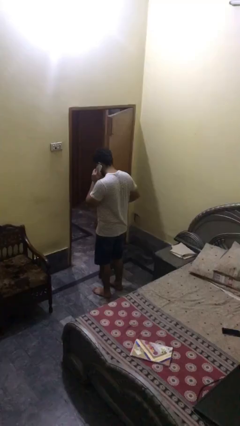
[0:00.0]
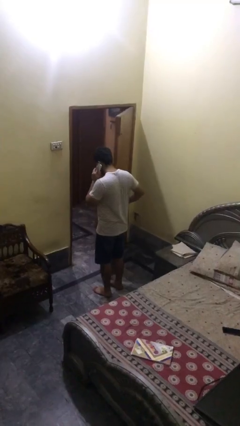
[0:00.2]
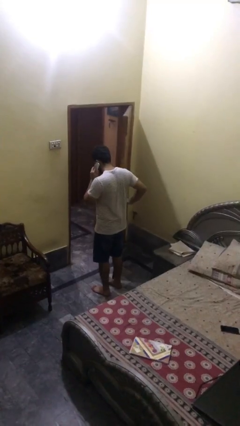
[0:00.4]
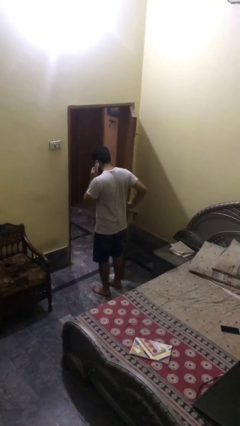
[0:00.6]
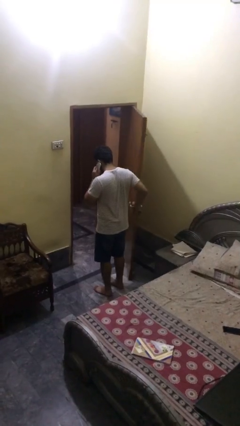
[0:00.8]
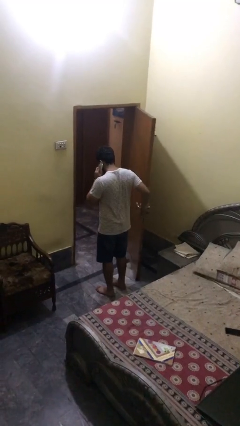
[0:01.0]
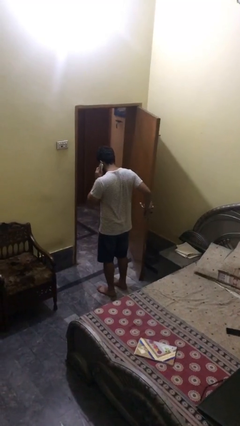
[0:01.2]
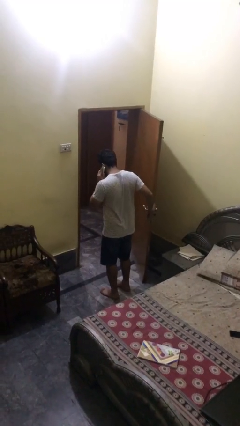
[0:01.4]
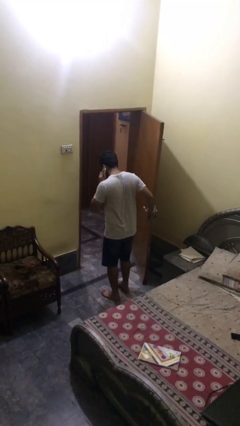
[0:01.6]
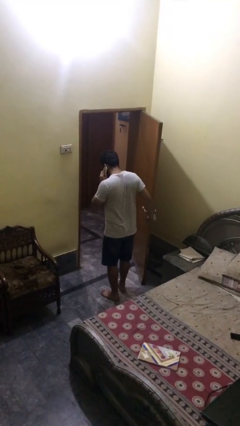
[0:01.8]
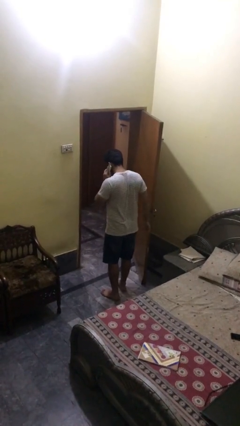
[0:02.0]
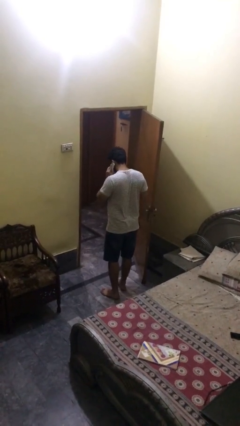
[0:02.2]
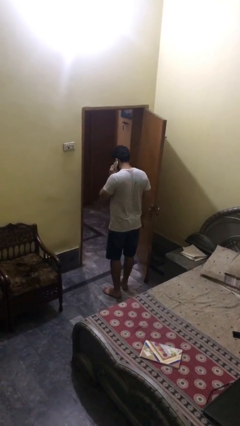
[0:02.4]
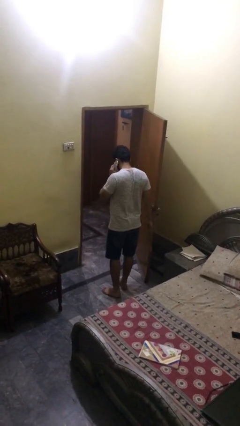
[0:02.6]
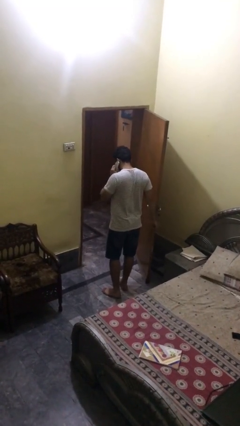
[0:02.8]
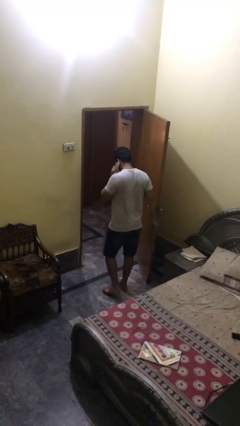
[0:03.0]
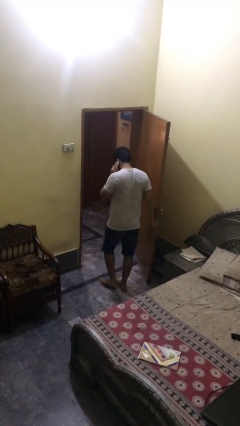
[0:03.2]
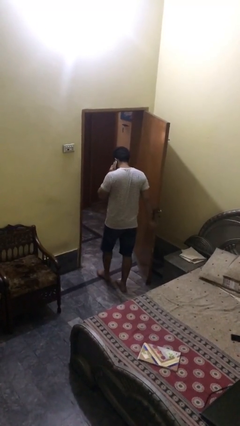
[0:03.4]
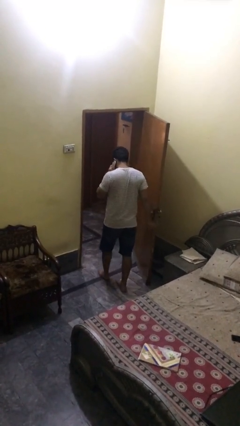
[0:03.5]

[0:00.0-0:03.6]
person opens facility door

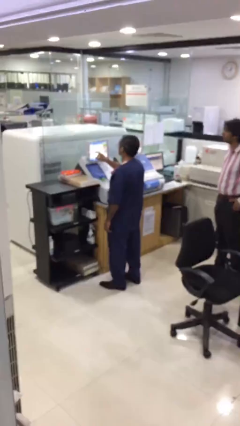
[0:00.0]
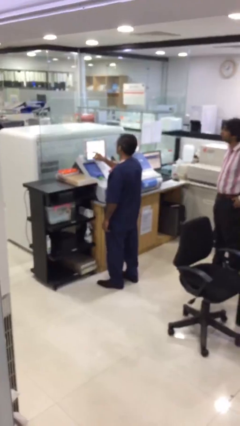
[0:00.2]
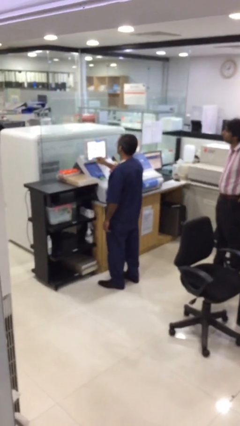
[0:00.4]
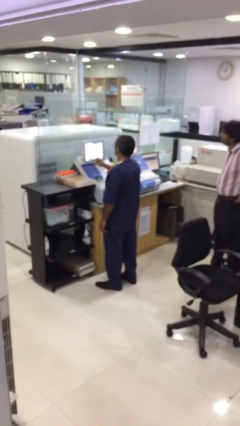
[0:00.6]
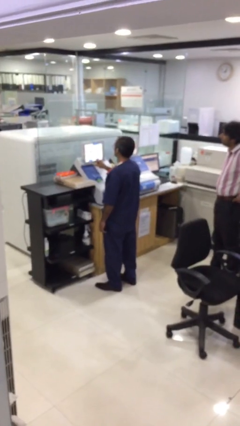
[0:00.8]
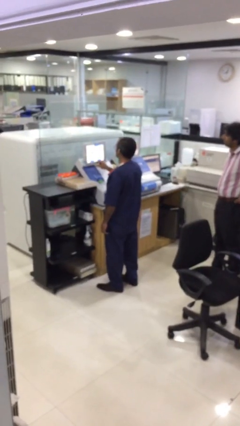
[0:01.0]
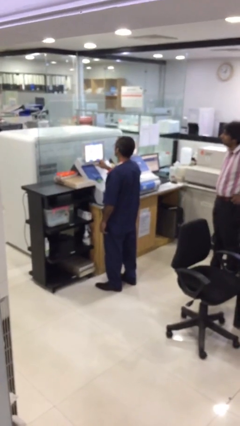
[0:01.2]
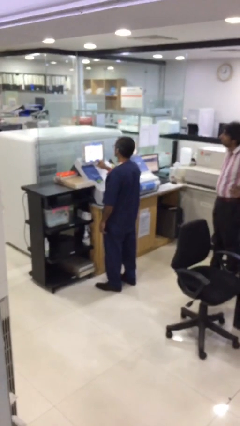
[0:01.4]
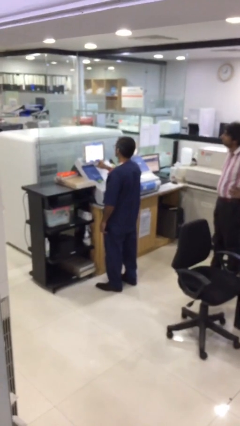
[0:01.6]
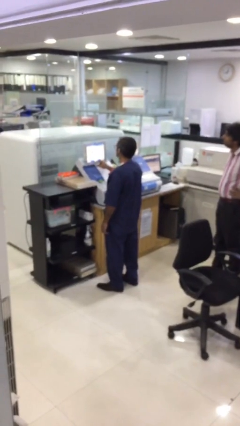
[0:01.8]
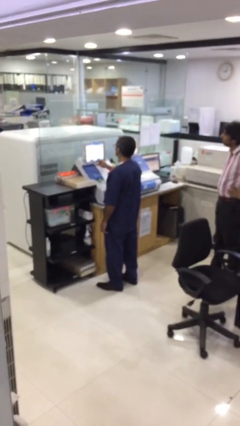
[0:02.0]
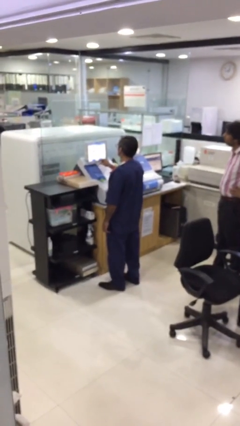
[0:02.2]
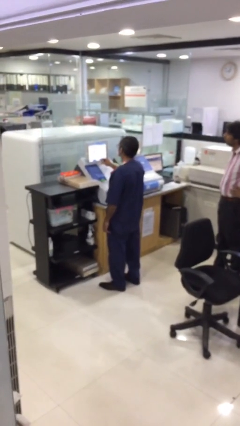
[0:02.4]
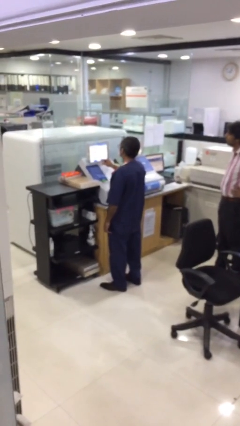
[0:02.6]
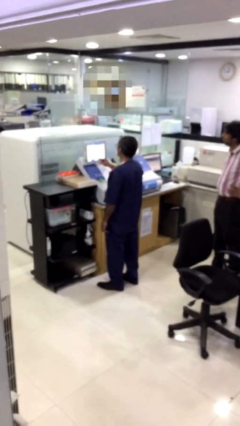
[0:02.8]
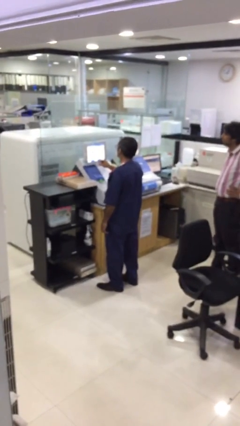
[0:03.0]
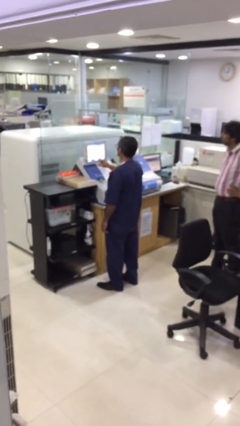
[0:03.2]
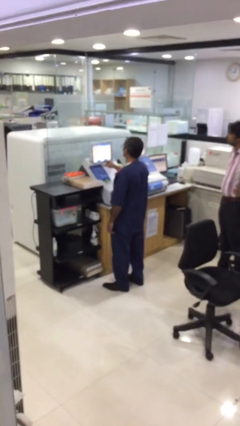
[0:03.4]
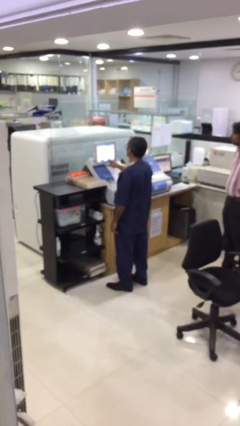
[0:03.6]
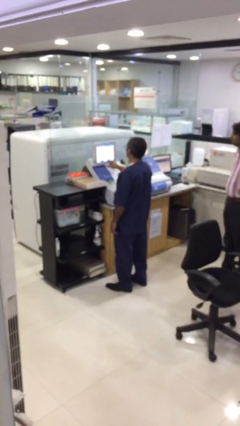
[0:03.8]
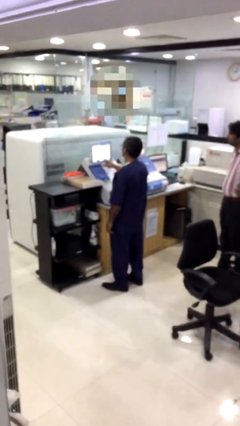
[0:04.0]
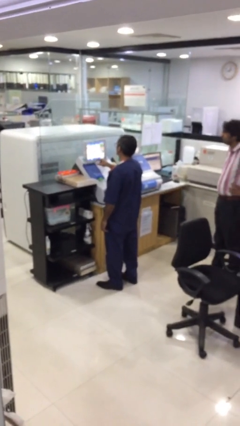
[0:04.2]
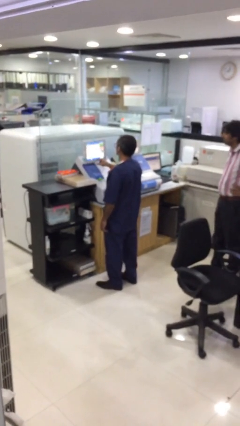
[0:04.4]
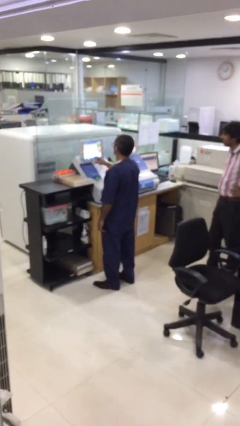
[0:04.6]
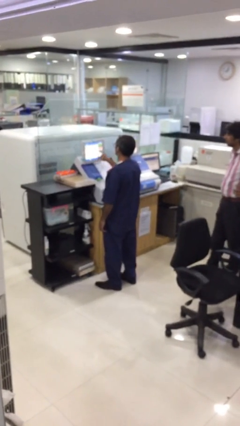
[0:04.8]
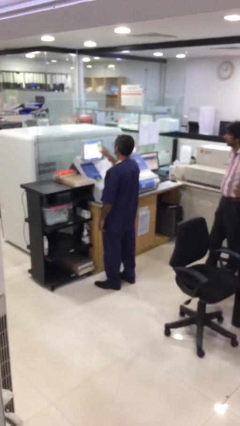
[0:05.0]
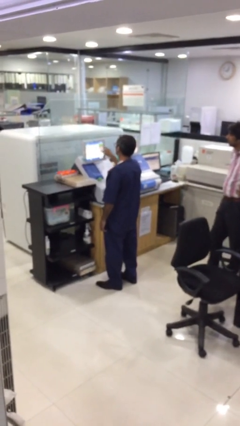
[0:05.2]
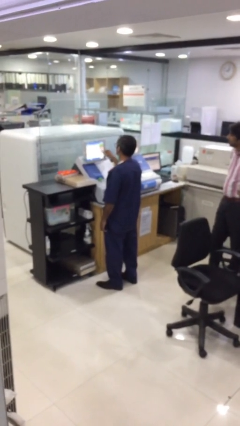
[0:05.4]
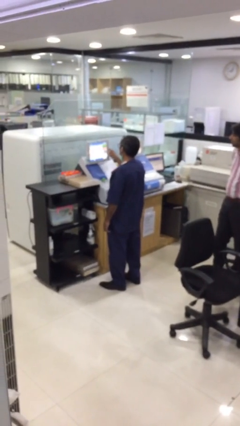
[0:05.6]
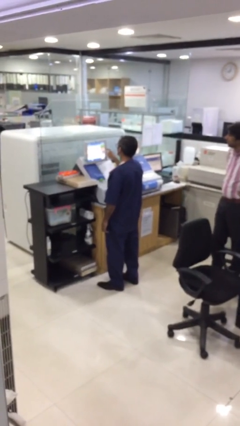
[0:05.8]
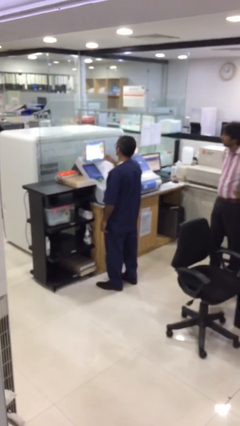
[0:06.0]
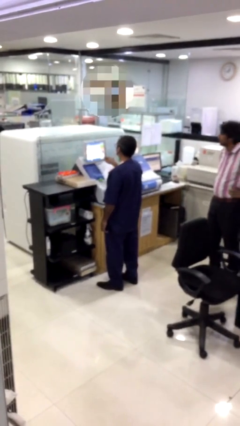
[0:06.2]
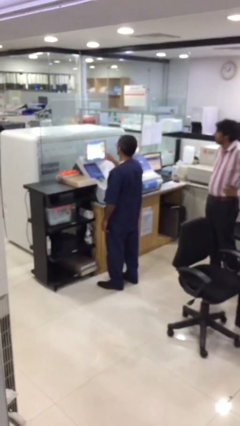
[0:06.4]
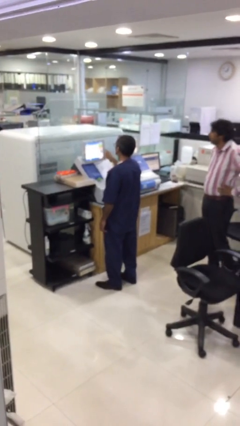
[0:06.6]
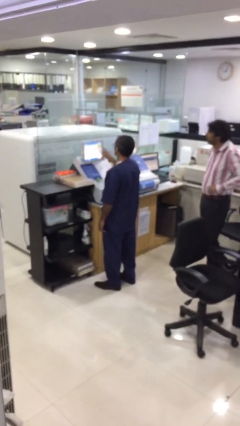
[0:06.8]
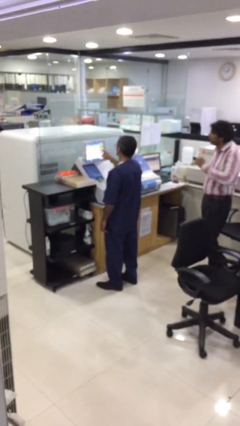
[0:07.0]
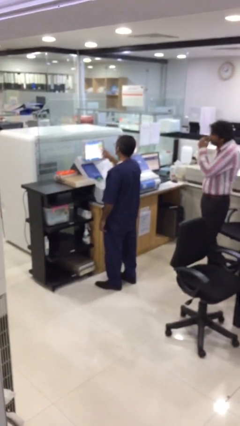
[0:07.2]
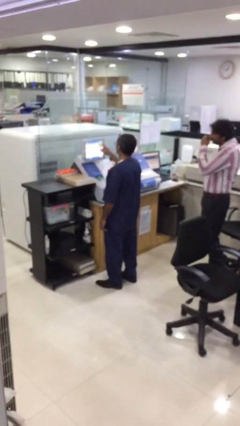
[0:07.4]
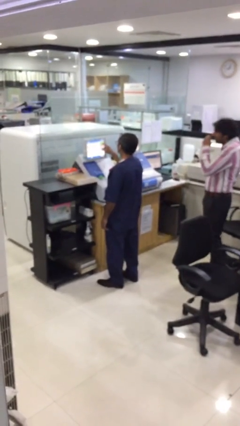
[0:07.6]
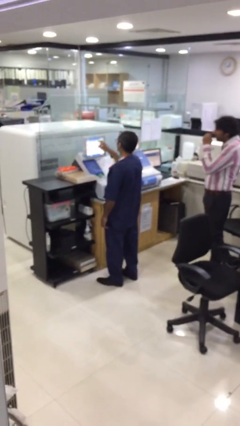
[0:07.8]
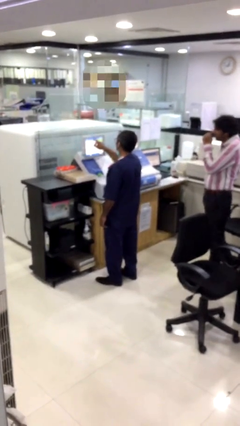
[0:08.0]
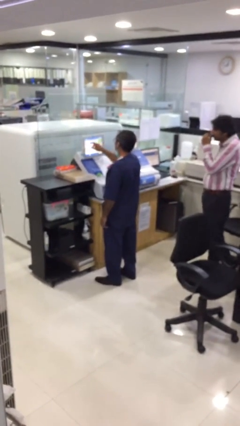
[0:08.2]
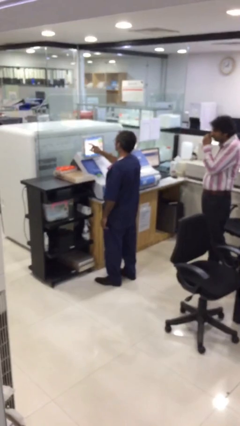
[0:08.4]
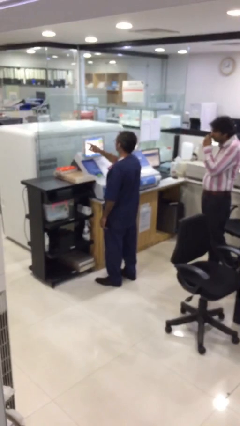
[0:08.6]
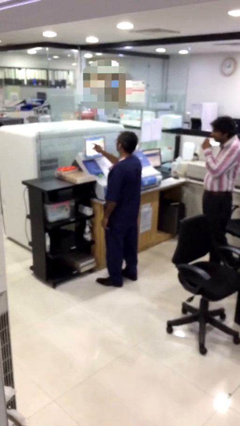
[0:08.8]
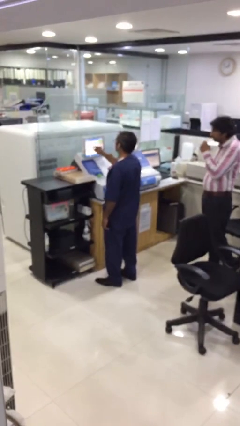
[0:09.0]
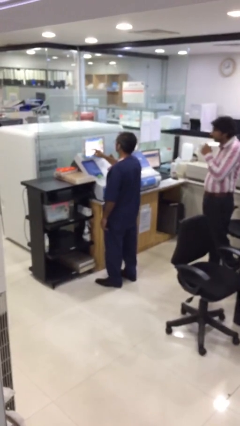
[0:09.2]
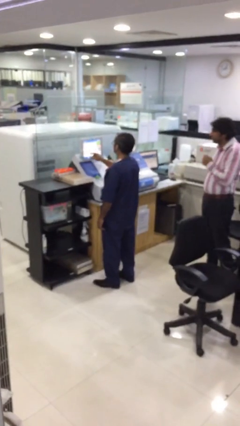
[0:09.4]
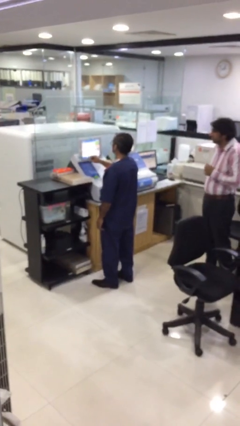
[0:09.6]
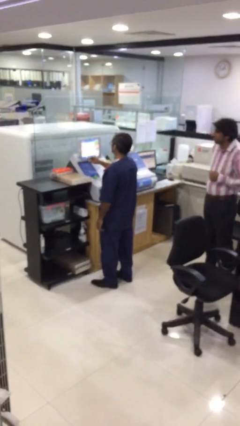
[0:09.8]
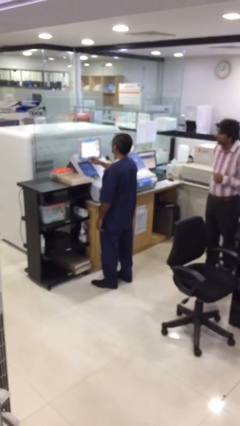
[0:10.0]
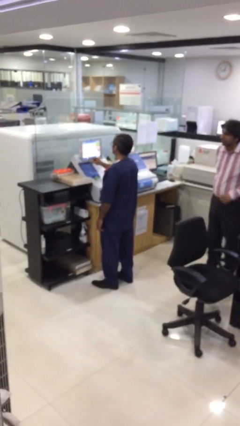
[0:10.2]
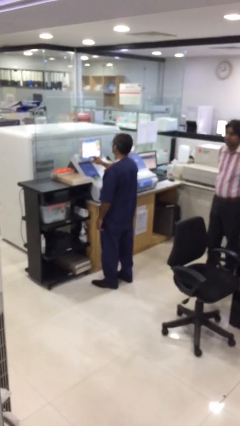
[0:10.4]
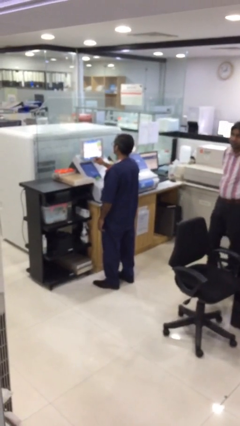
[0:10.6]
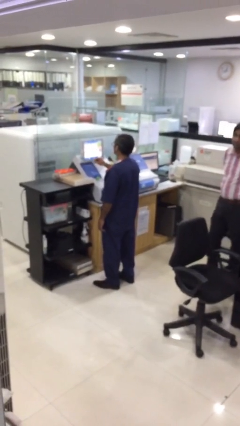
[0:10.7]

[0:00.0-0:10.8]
person purchases from machine

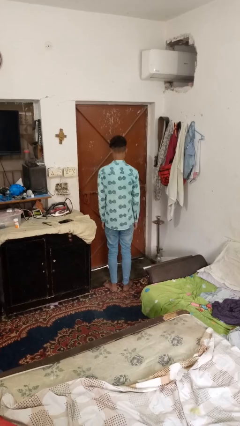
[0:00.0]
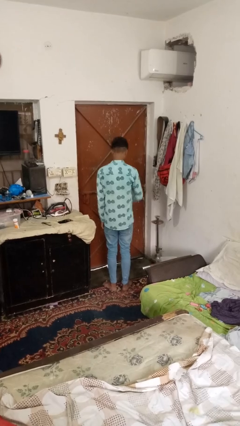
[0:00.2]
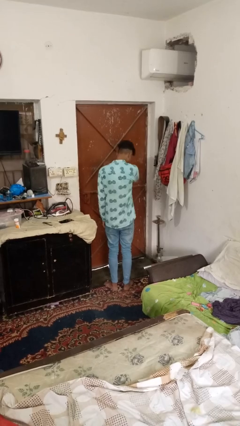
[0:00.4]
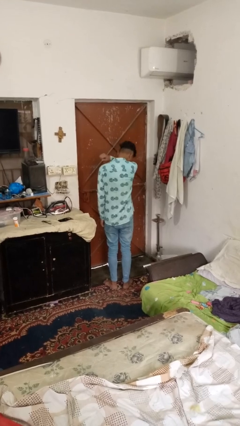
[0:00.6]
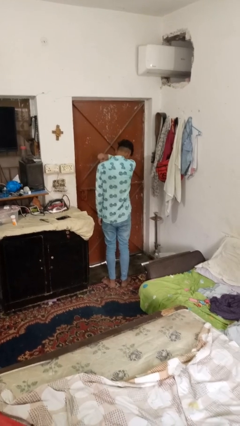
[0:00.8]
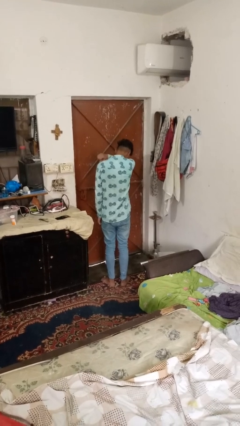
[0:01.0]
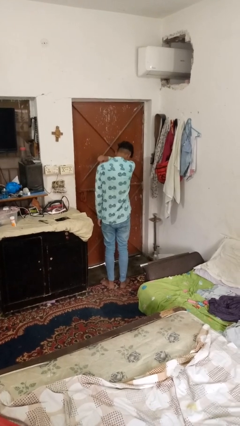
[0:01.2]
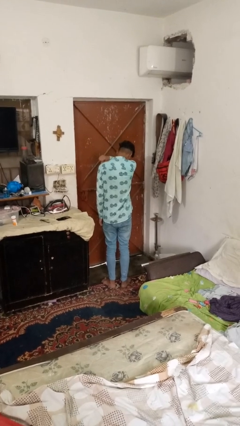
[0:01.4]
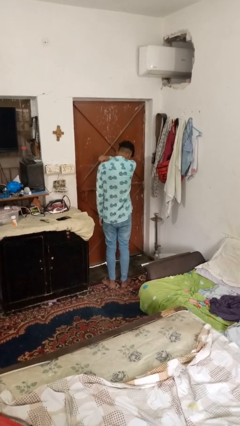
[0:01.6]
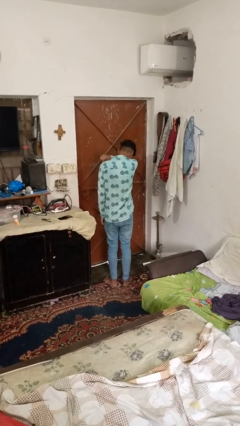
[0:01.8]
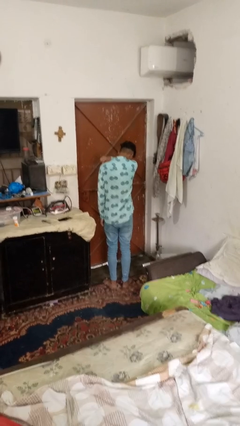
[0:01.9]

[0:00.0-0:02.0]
person sneezes into arm

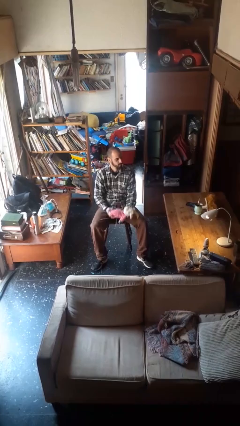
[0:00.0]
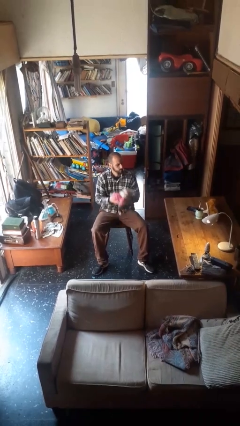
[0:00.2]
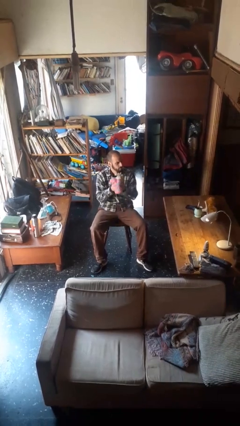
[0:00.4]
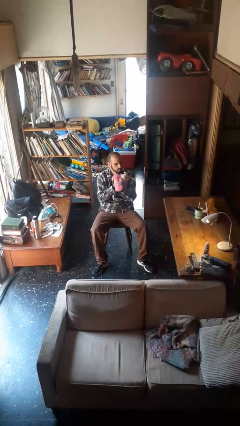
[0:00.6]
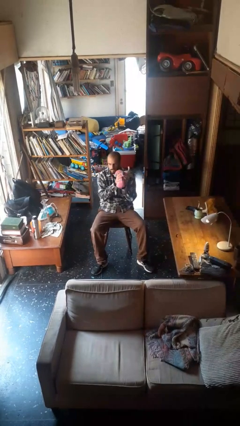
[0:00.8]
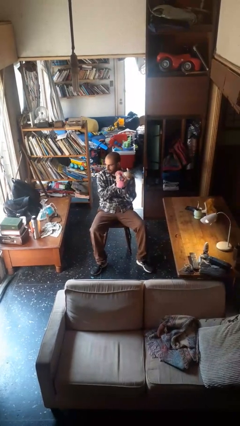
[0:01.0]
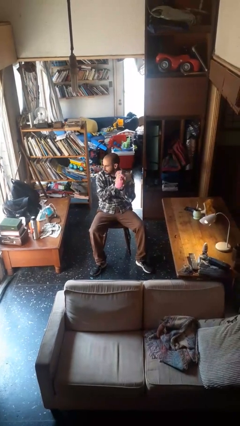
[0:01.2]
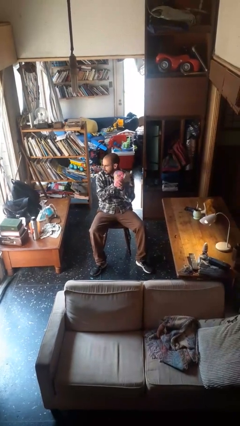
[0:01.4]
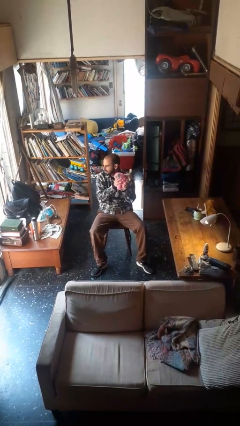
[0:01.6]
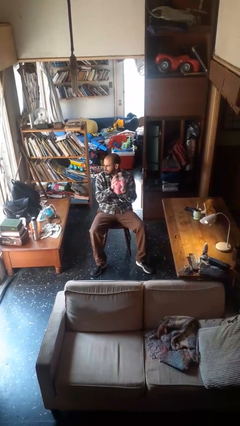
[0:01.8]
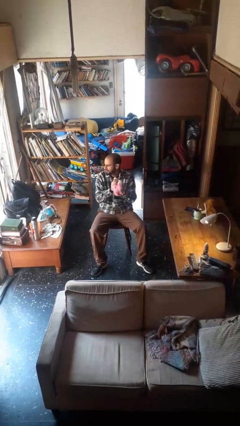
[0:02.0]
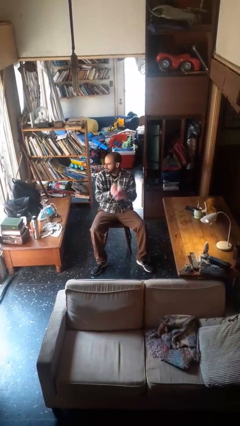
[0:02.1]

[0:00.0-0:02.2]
person squeezes object
